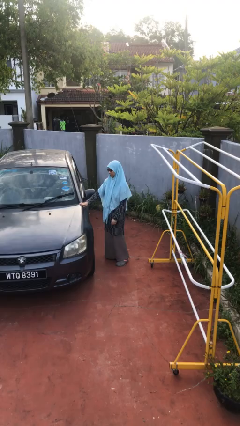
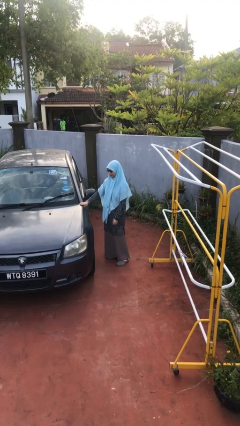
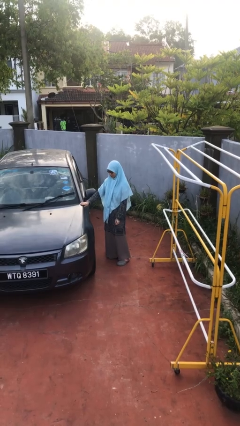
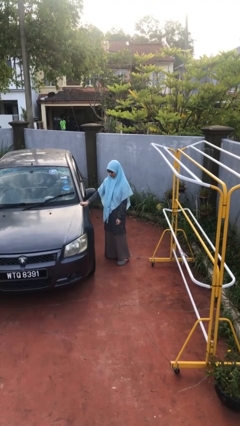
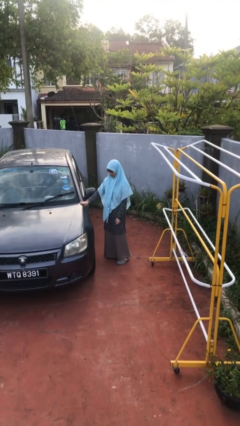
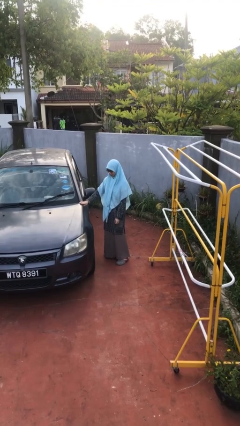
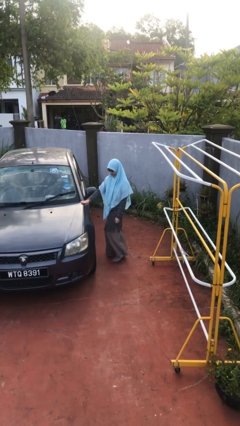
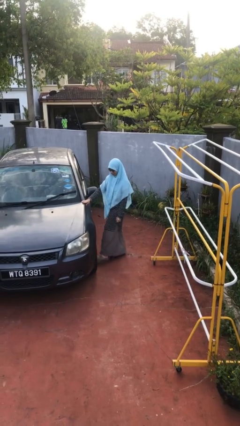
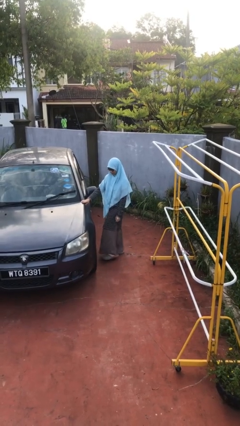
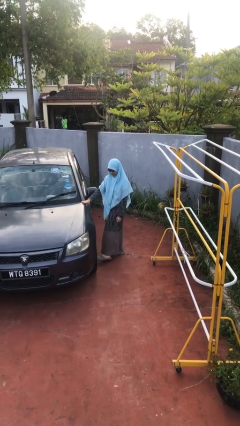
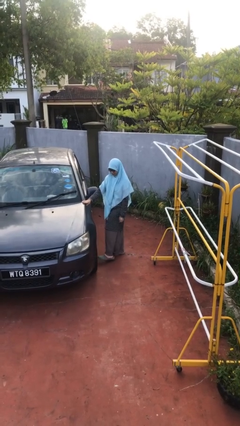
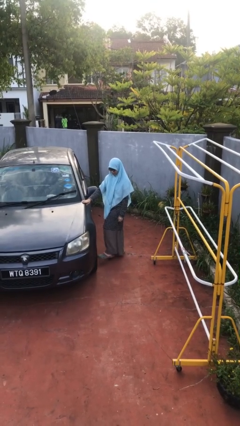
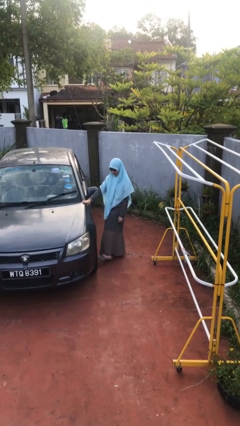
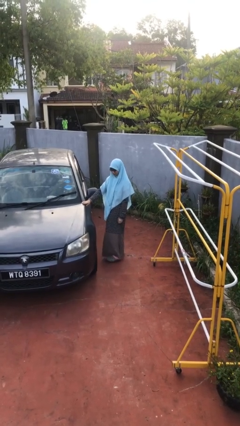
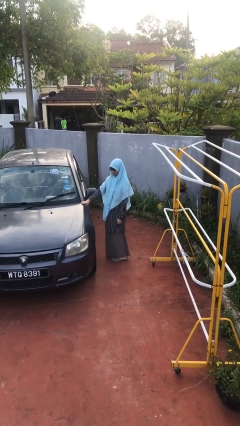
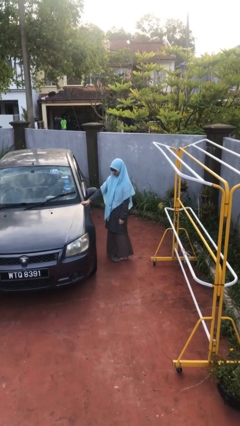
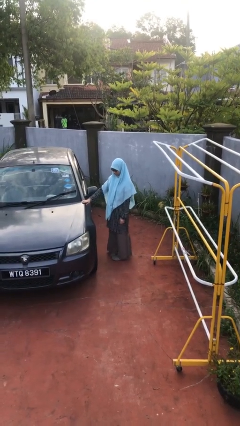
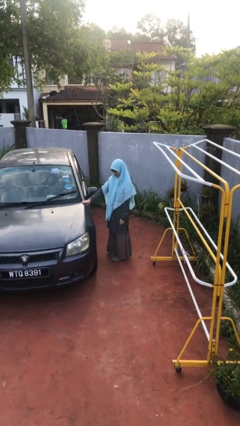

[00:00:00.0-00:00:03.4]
person kicks car tires

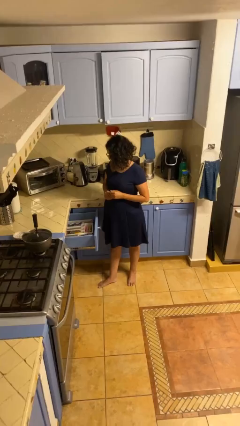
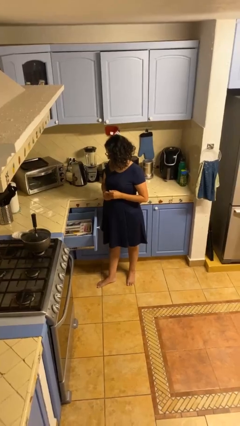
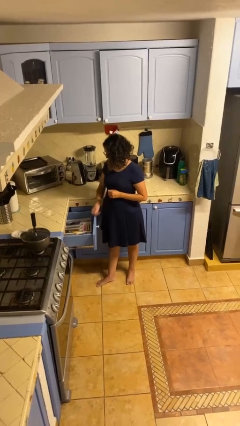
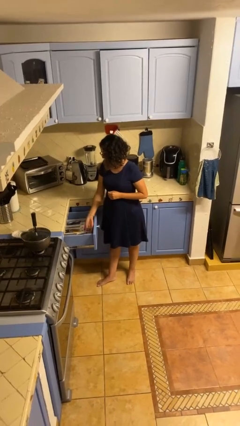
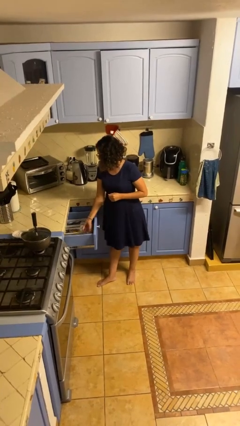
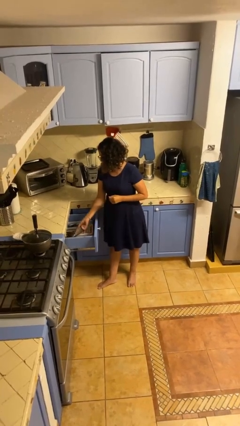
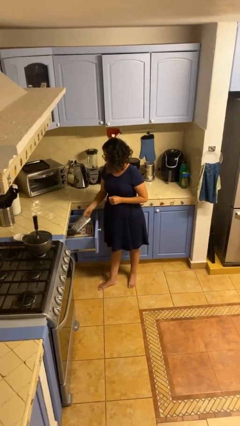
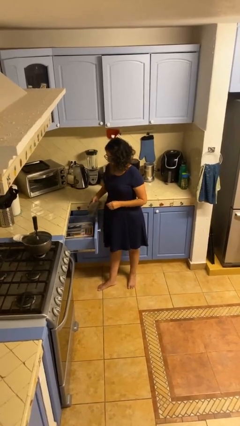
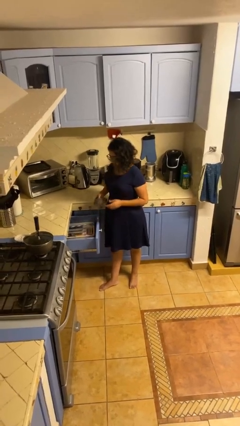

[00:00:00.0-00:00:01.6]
person takes object from kitchen drawer

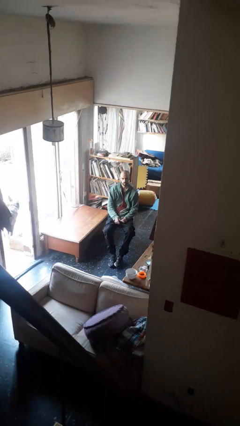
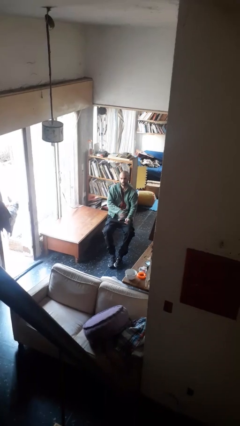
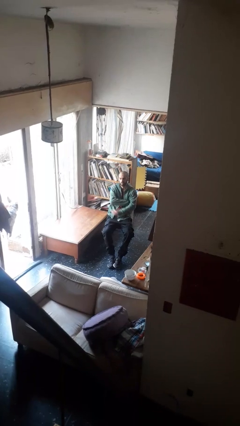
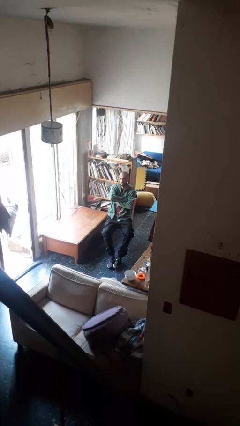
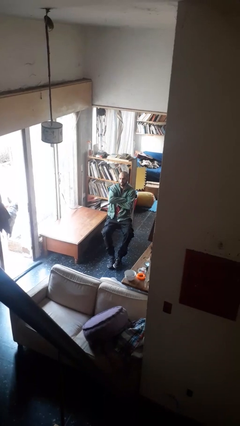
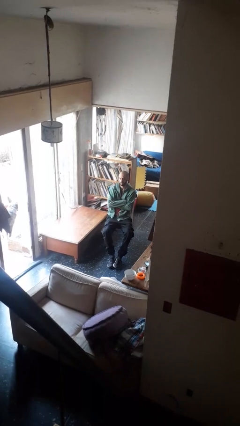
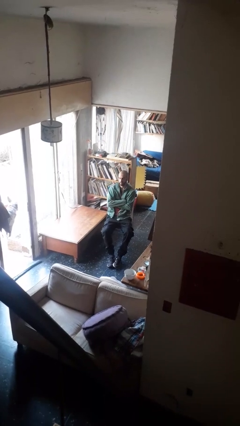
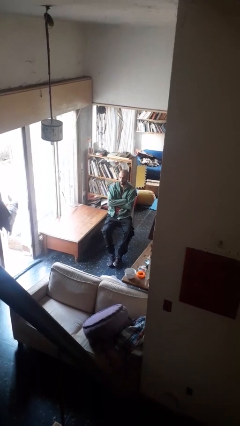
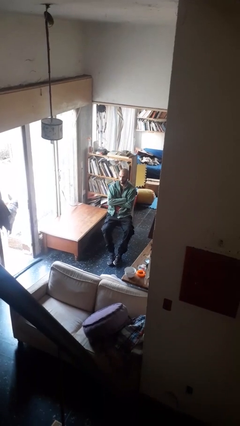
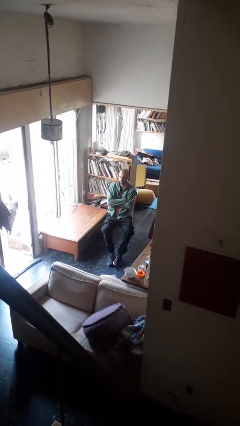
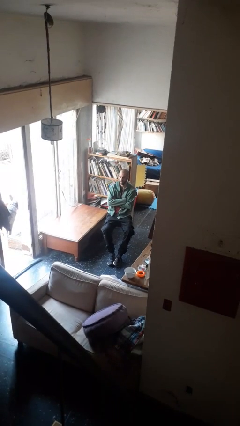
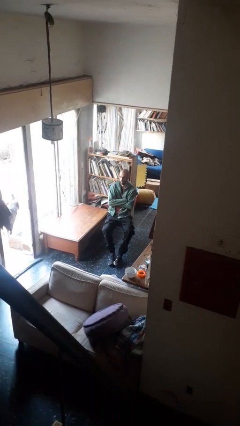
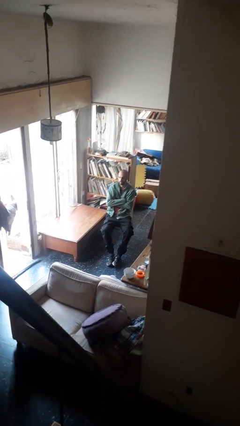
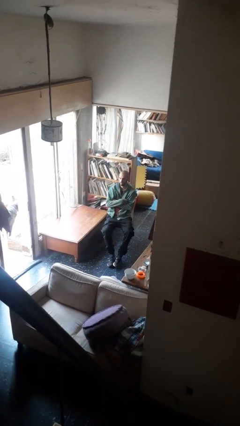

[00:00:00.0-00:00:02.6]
person crosses arms

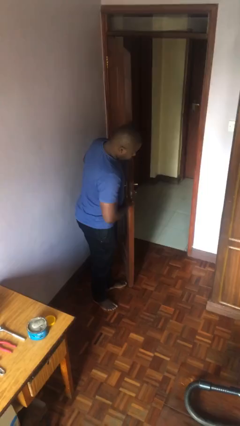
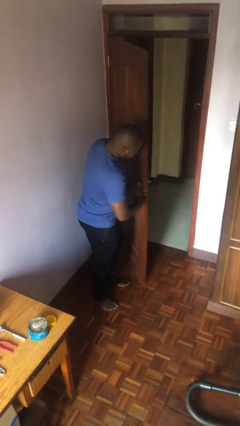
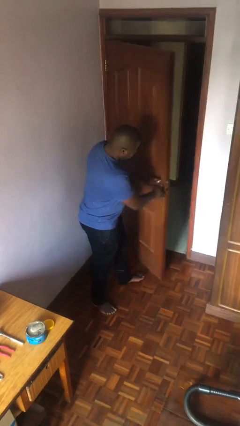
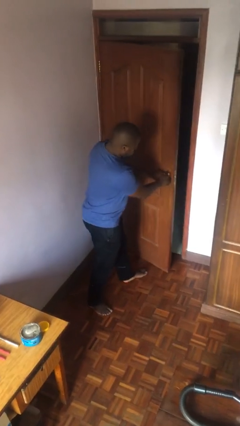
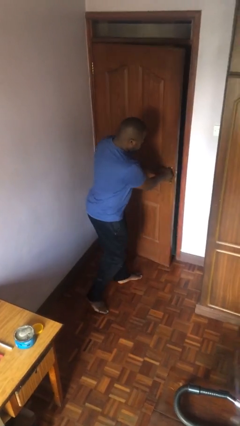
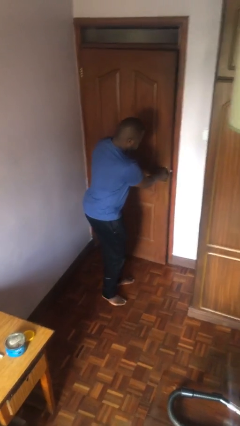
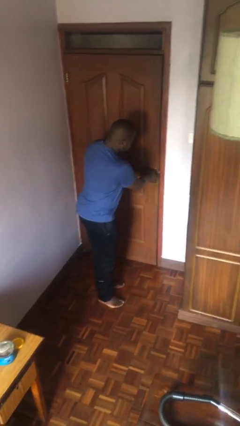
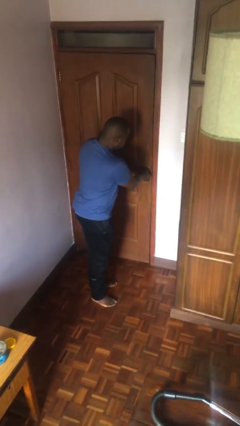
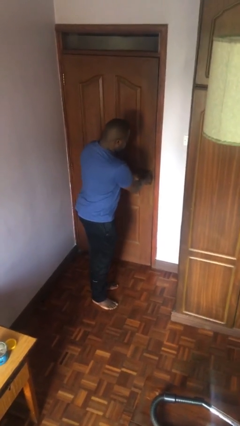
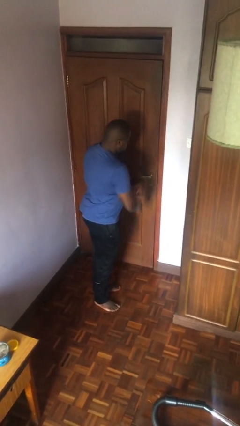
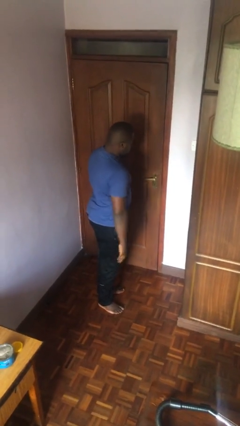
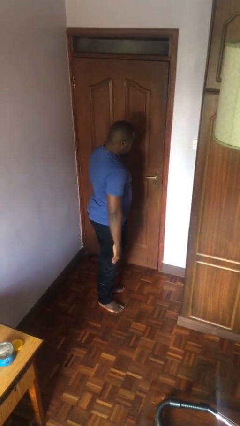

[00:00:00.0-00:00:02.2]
person closes facility door

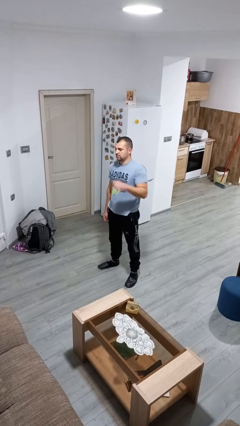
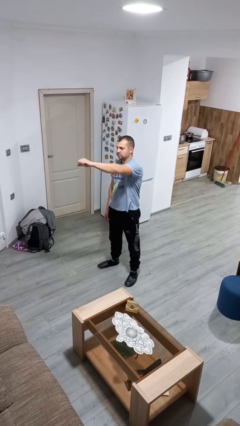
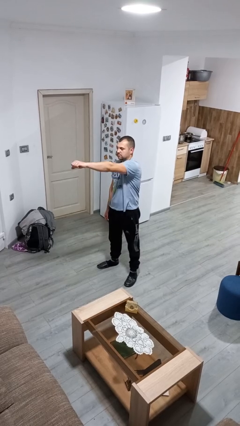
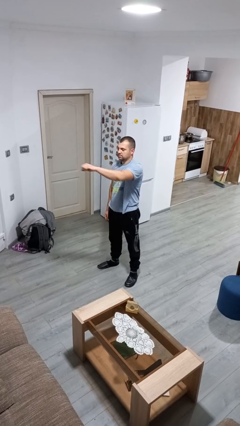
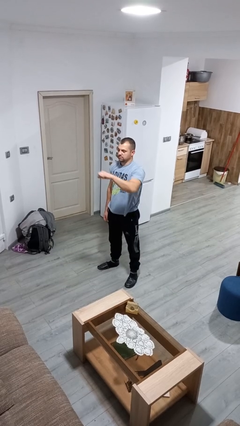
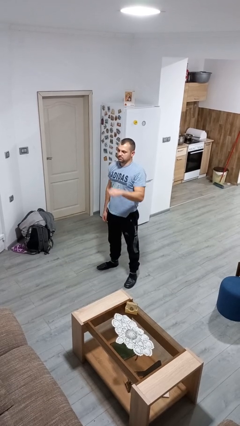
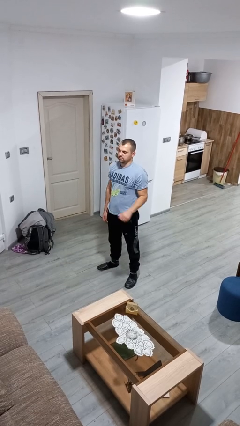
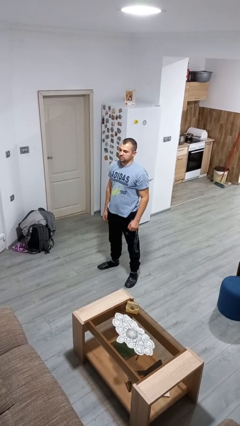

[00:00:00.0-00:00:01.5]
person punches

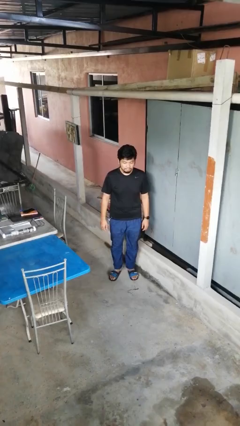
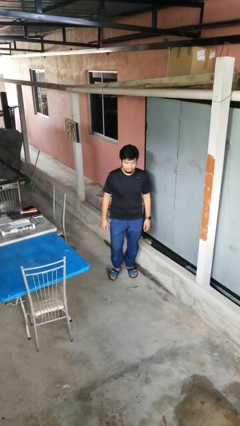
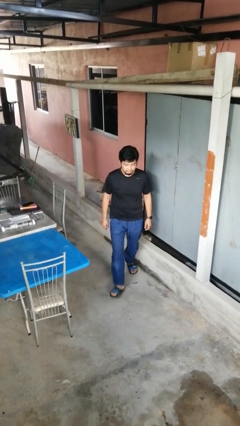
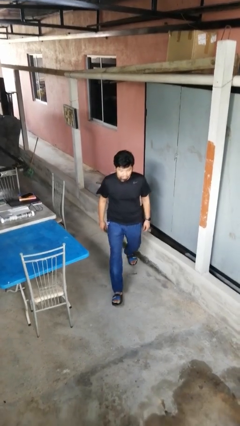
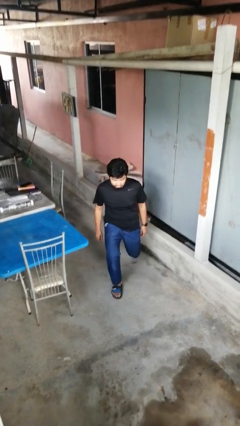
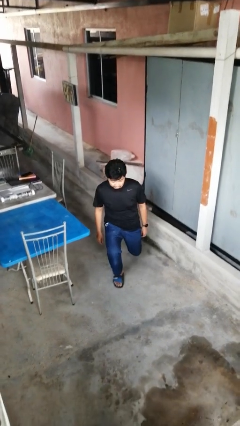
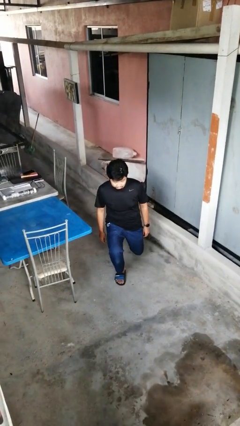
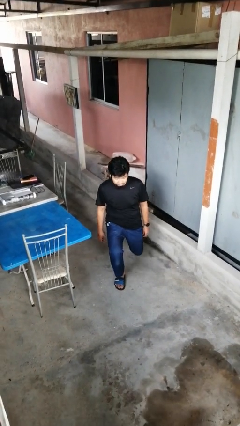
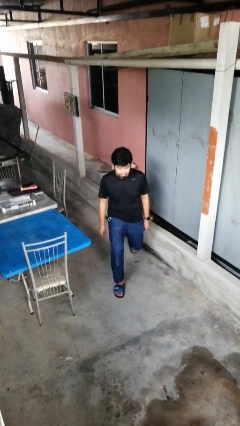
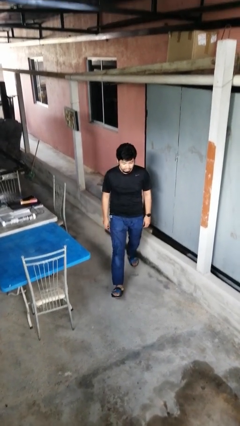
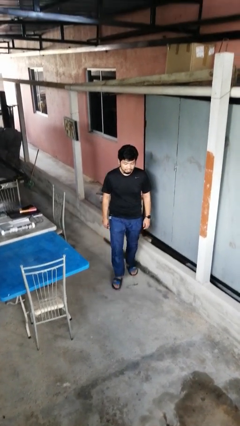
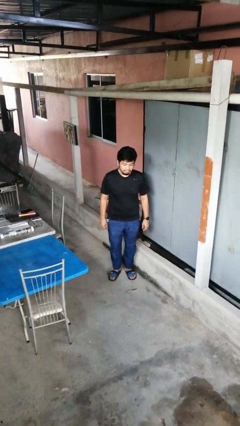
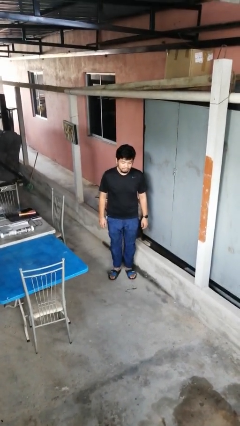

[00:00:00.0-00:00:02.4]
person exercises with lunges

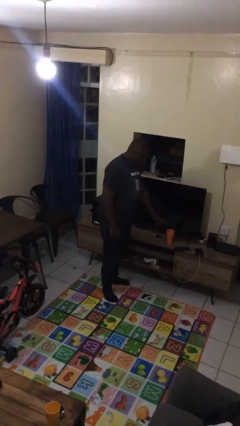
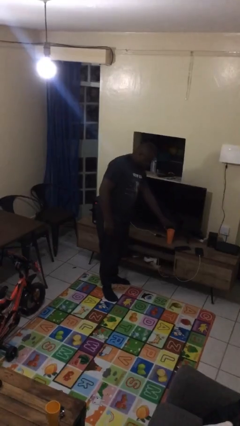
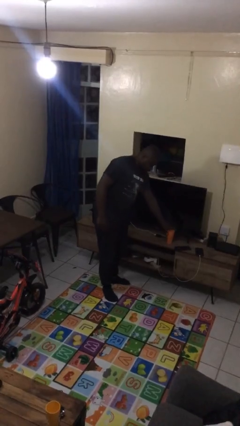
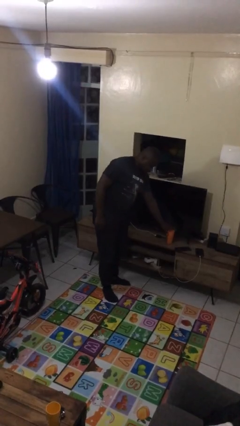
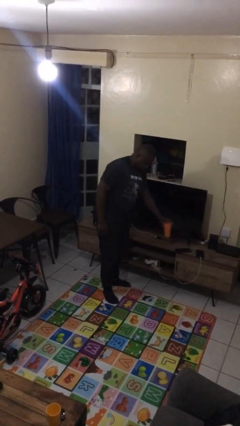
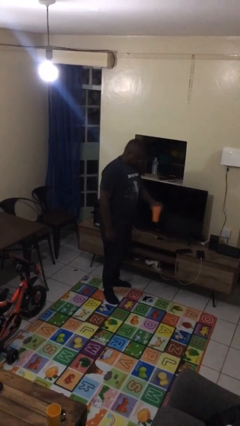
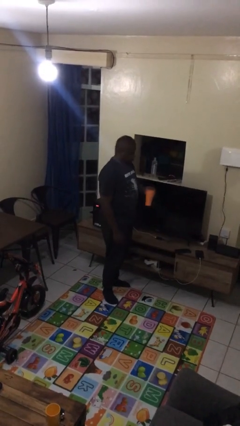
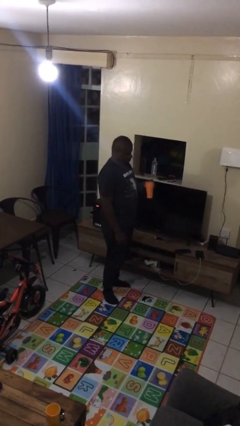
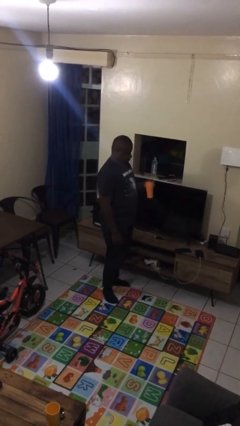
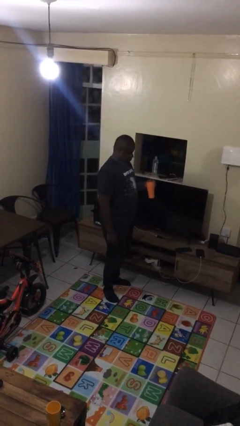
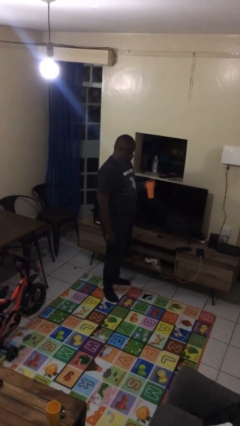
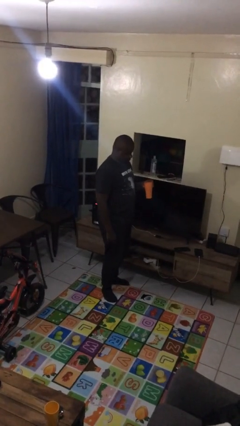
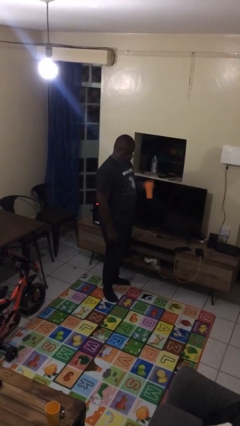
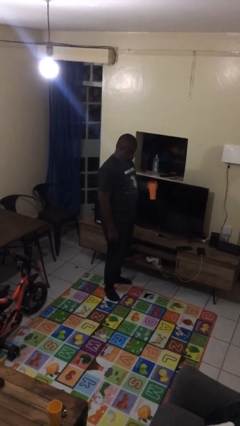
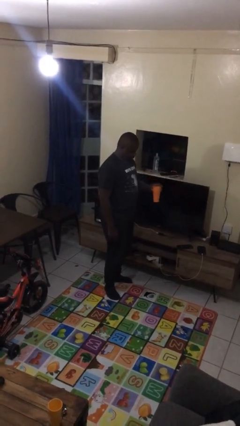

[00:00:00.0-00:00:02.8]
person picks up object from countertop

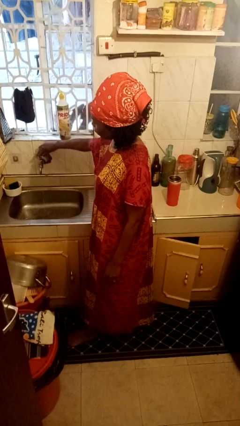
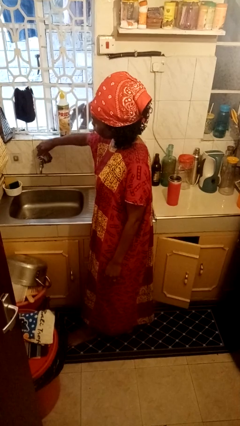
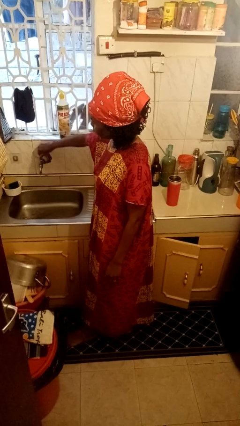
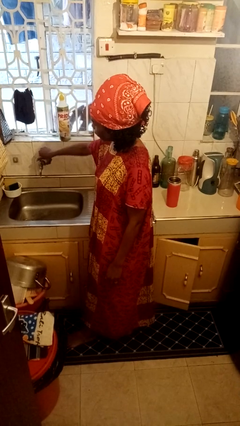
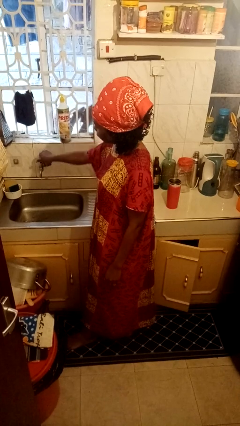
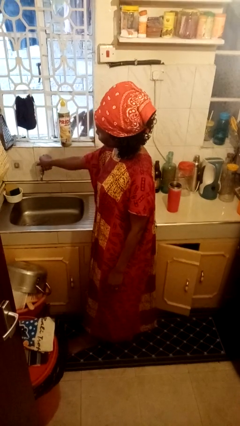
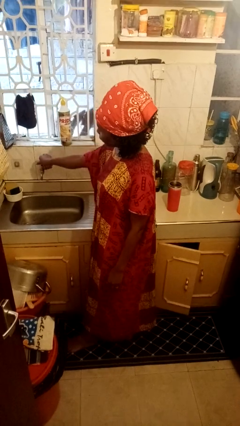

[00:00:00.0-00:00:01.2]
person turns off faucet
